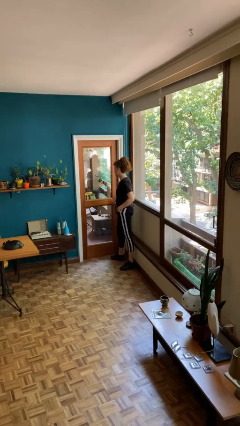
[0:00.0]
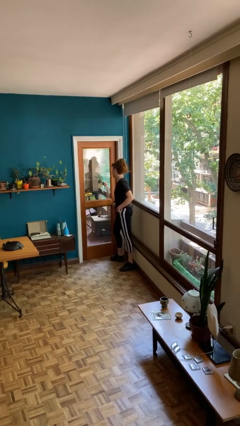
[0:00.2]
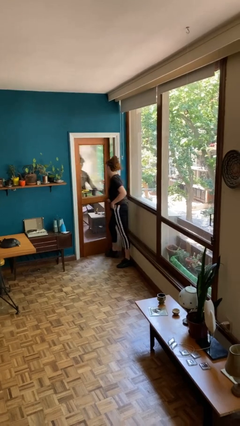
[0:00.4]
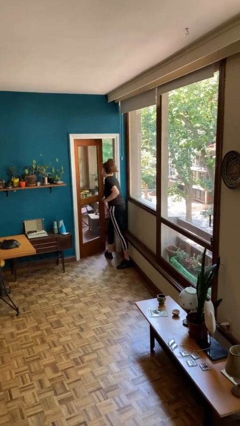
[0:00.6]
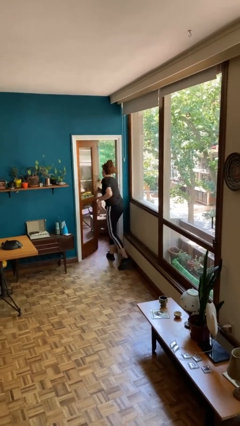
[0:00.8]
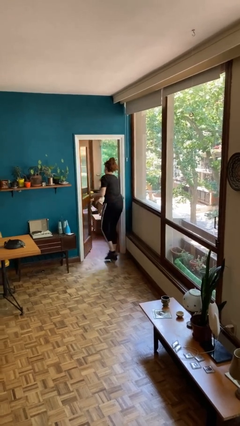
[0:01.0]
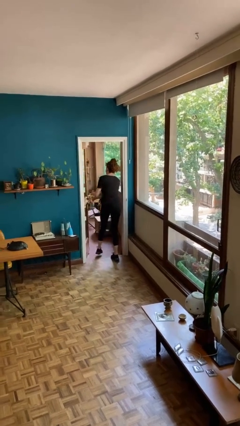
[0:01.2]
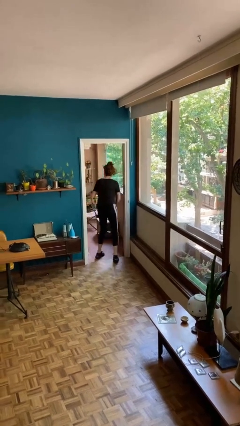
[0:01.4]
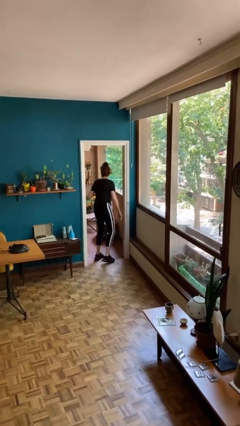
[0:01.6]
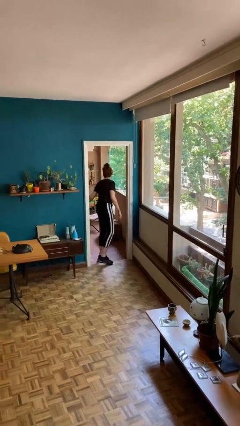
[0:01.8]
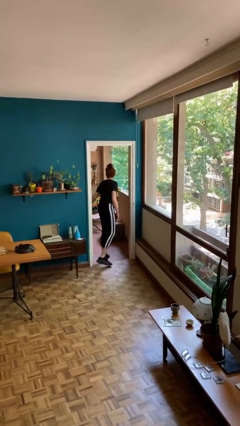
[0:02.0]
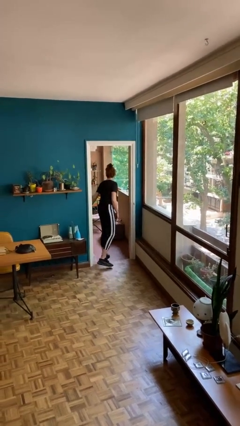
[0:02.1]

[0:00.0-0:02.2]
person opens facility door

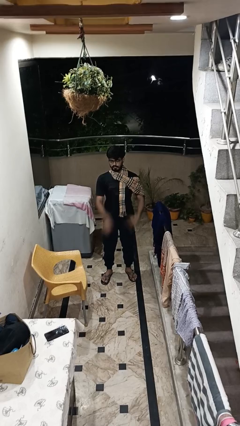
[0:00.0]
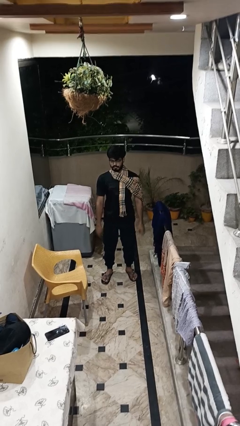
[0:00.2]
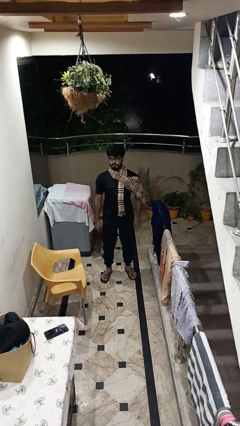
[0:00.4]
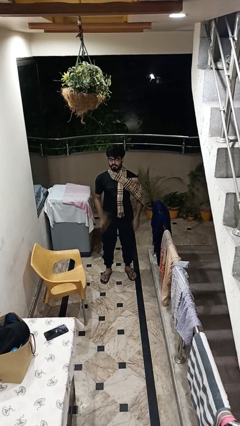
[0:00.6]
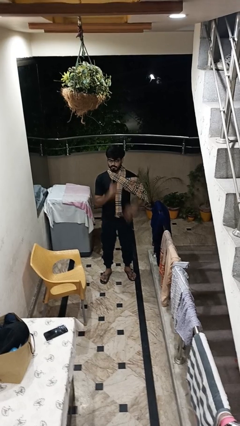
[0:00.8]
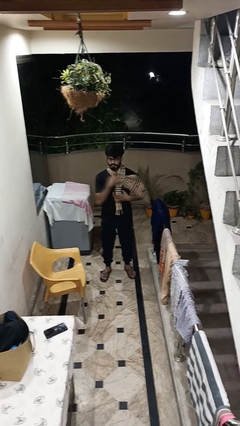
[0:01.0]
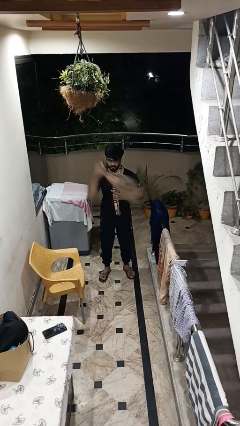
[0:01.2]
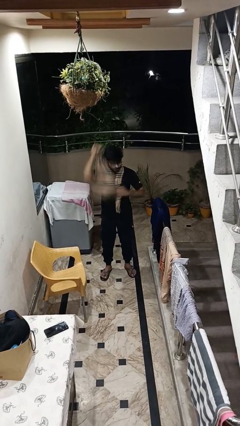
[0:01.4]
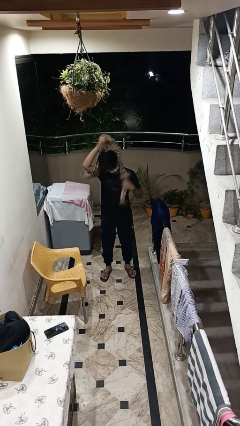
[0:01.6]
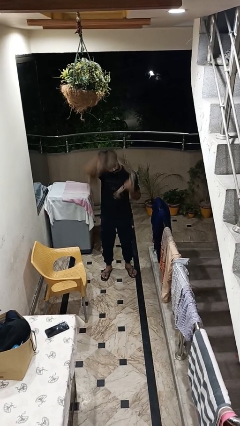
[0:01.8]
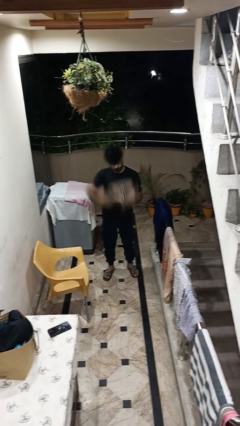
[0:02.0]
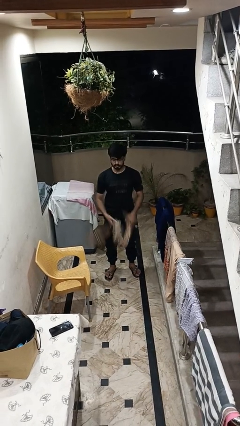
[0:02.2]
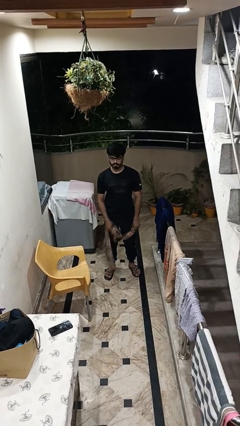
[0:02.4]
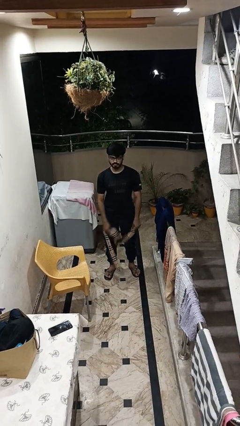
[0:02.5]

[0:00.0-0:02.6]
person takes off scarf

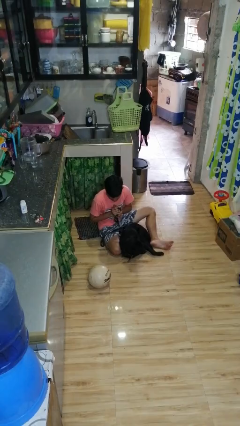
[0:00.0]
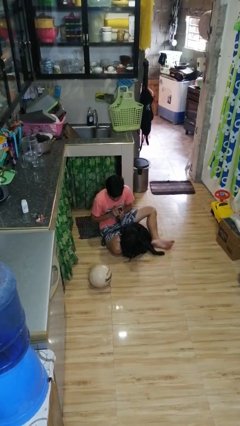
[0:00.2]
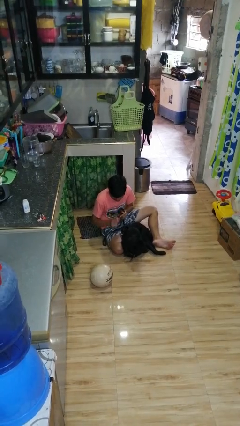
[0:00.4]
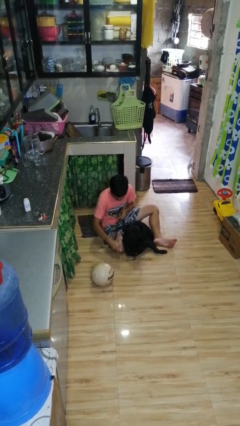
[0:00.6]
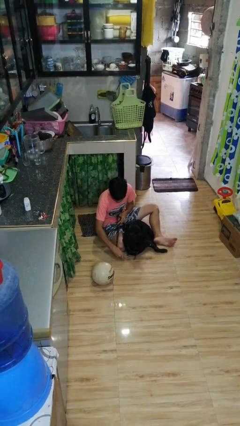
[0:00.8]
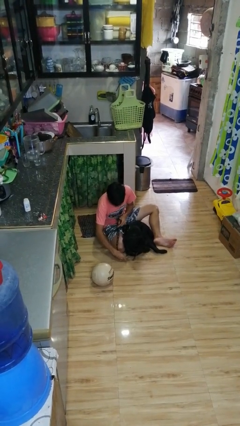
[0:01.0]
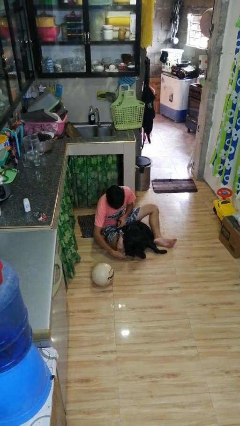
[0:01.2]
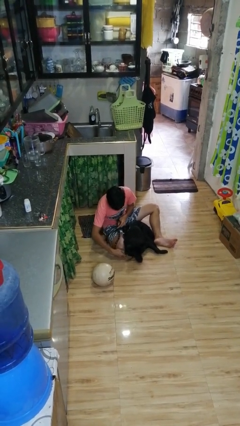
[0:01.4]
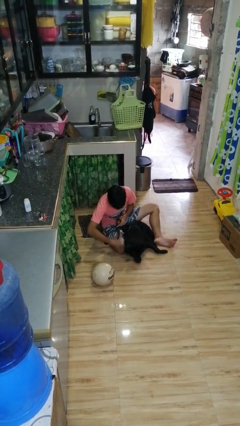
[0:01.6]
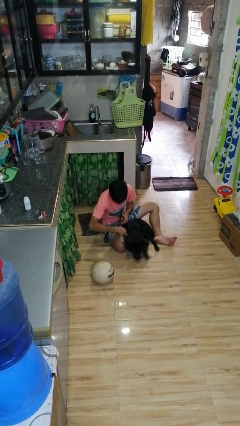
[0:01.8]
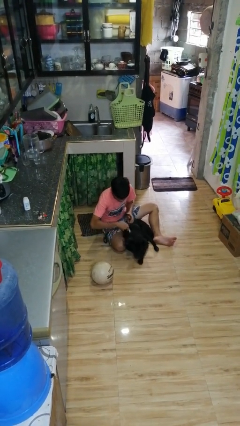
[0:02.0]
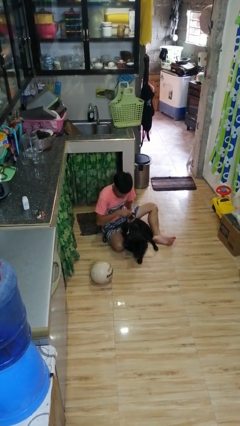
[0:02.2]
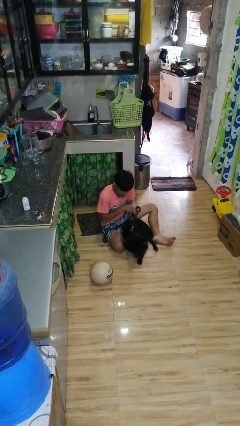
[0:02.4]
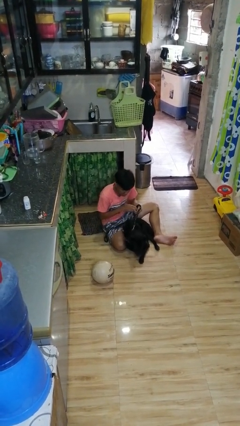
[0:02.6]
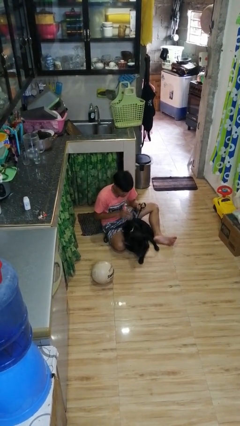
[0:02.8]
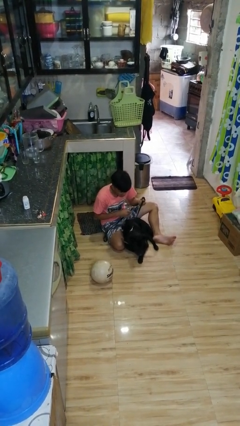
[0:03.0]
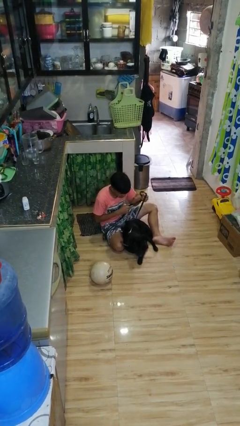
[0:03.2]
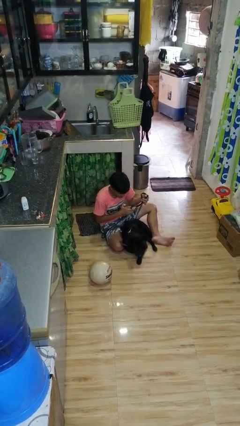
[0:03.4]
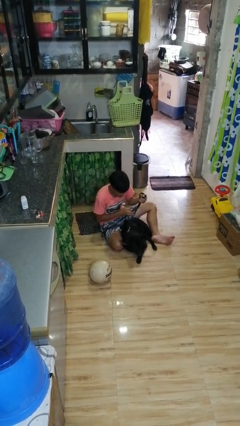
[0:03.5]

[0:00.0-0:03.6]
person attaches leash to dog

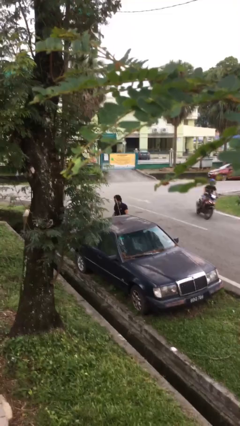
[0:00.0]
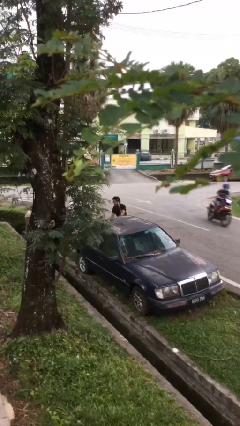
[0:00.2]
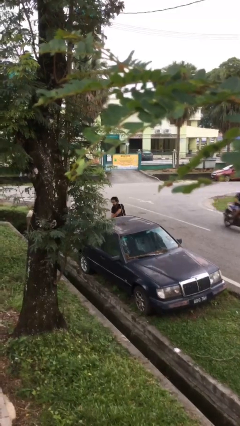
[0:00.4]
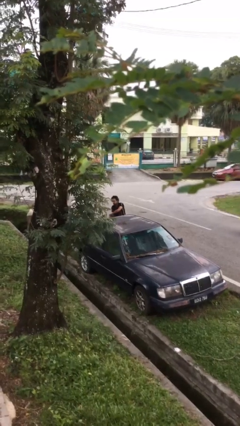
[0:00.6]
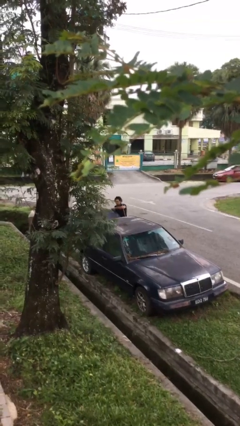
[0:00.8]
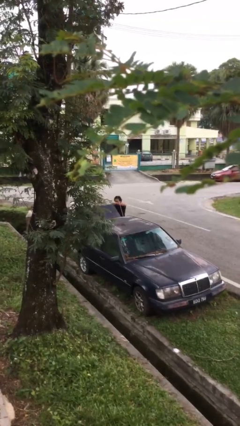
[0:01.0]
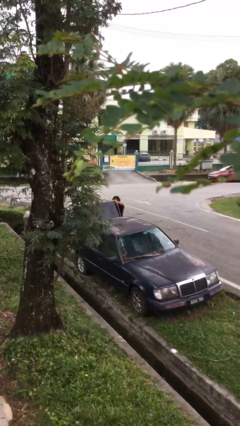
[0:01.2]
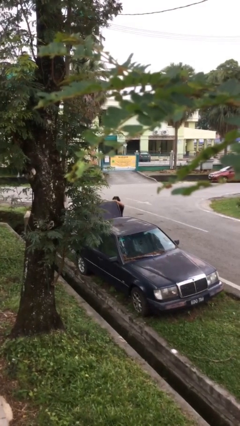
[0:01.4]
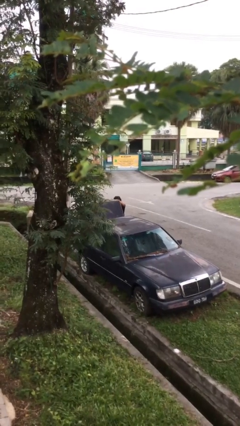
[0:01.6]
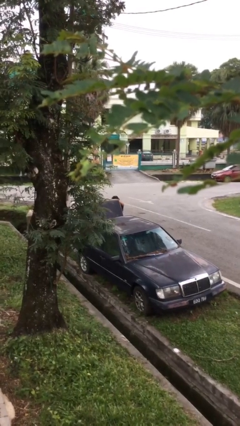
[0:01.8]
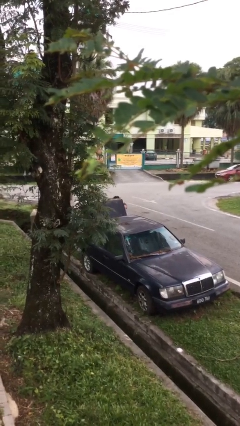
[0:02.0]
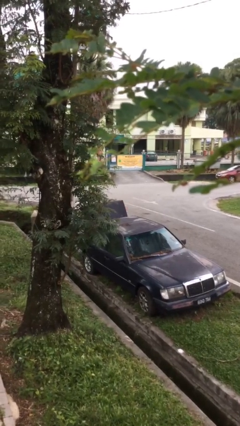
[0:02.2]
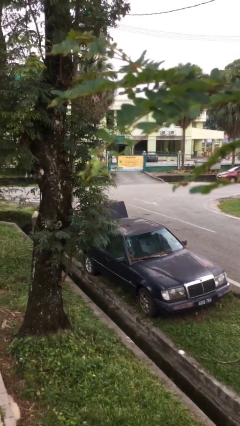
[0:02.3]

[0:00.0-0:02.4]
person opens car trunk

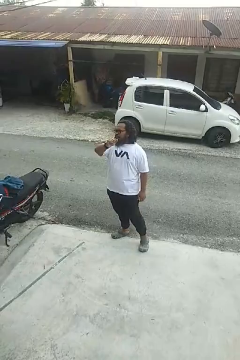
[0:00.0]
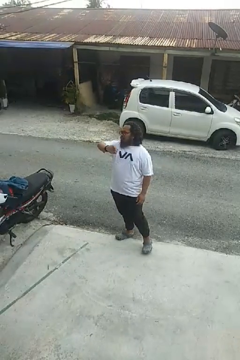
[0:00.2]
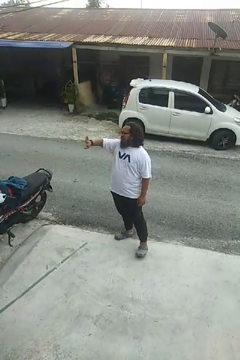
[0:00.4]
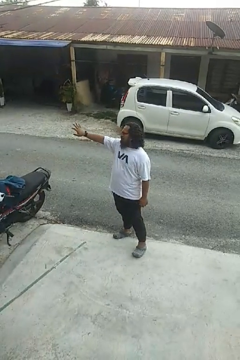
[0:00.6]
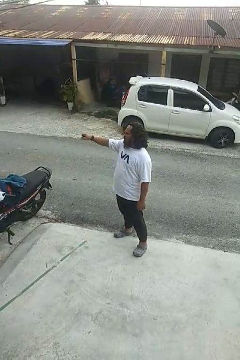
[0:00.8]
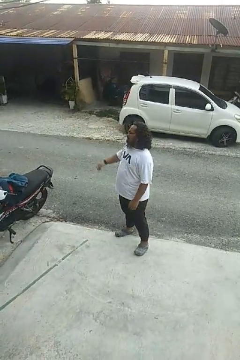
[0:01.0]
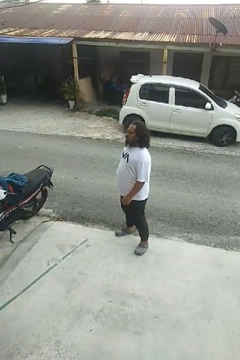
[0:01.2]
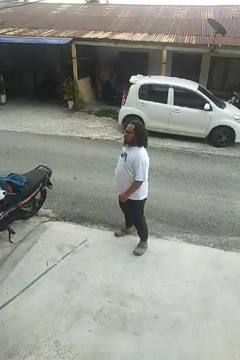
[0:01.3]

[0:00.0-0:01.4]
person gestures swipe right

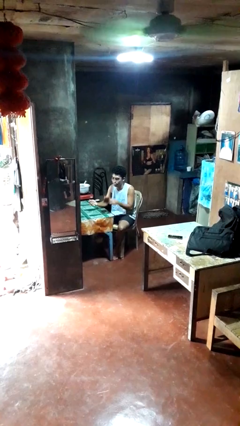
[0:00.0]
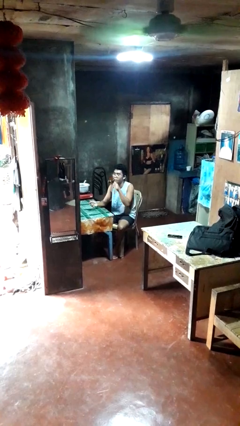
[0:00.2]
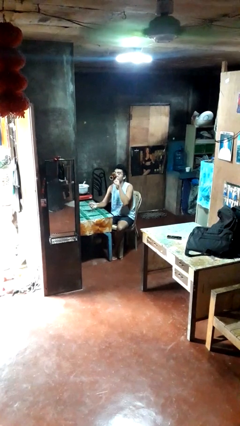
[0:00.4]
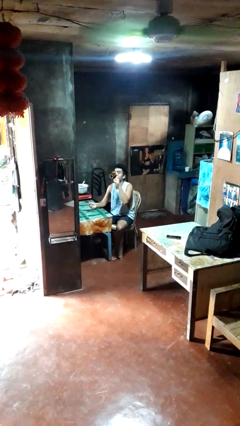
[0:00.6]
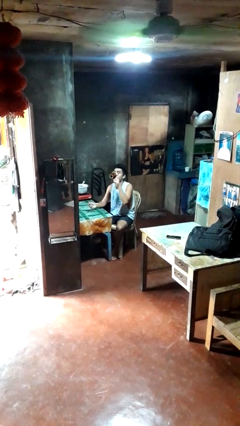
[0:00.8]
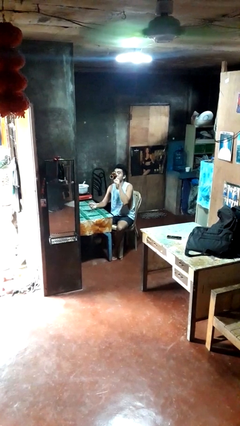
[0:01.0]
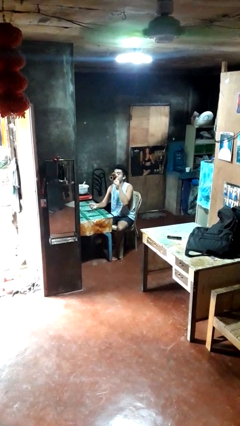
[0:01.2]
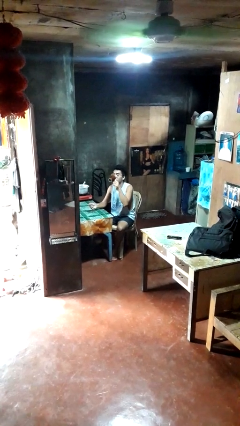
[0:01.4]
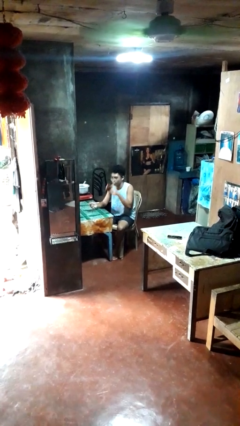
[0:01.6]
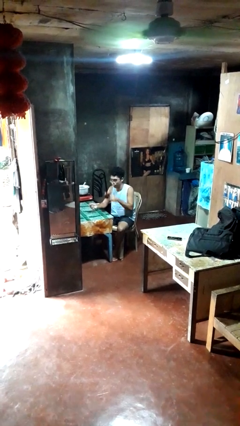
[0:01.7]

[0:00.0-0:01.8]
person drinks from mug

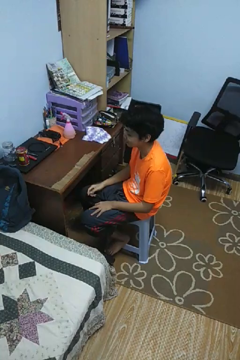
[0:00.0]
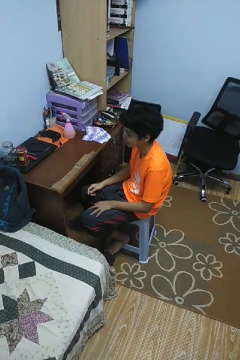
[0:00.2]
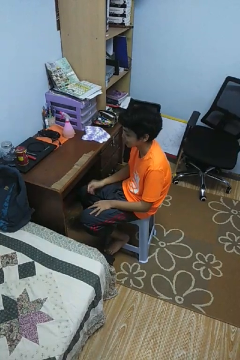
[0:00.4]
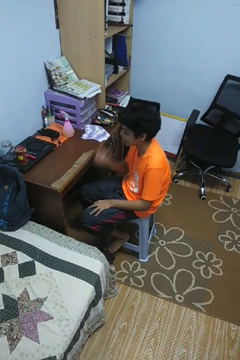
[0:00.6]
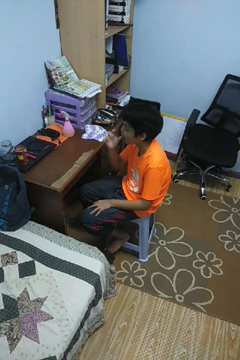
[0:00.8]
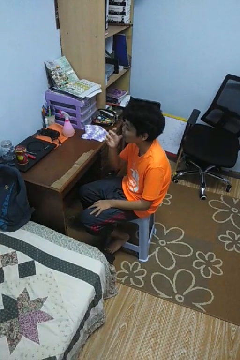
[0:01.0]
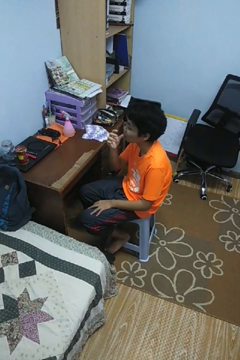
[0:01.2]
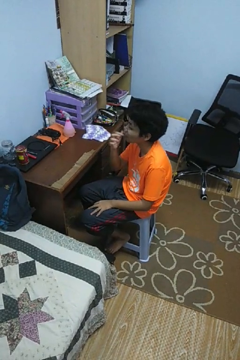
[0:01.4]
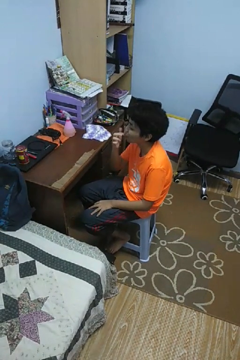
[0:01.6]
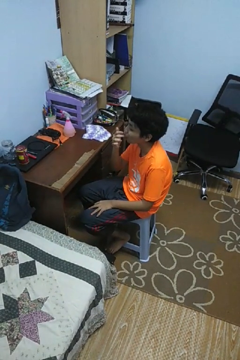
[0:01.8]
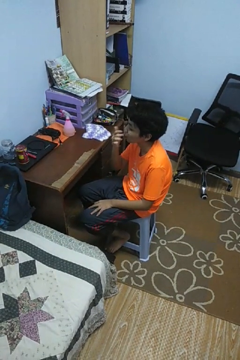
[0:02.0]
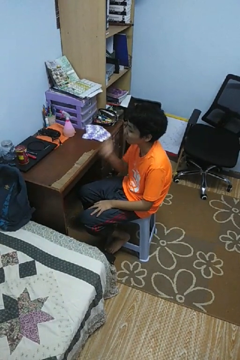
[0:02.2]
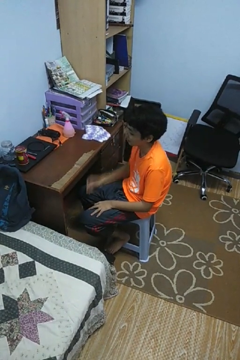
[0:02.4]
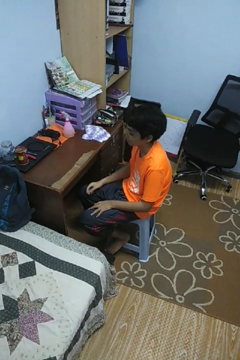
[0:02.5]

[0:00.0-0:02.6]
person licks fingers

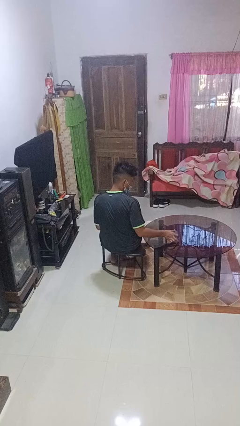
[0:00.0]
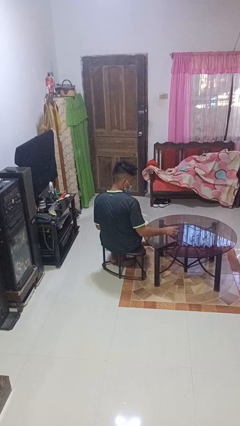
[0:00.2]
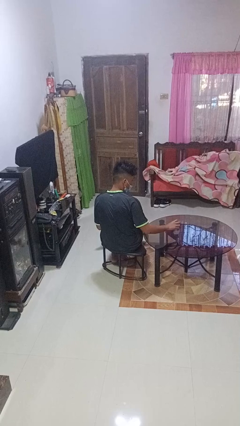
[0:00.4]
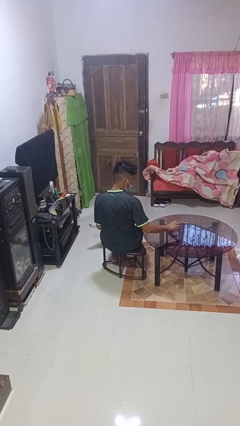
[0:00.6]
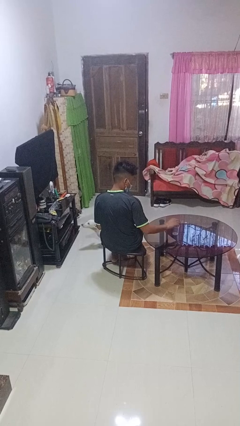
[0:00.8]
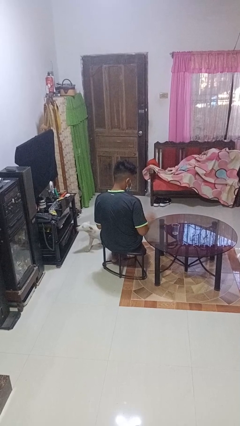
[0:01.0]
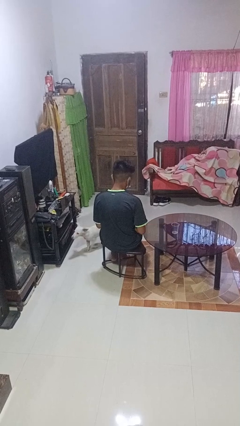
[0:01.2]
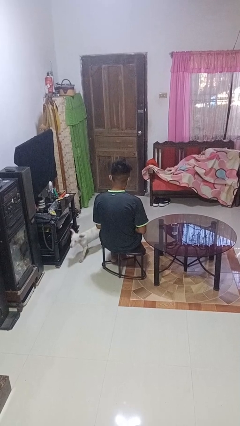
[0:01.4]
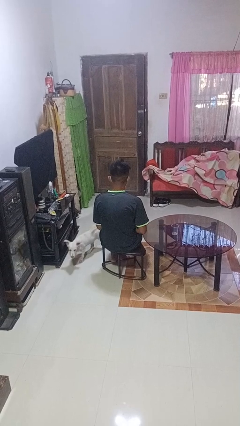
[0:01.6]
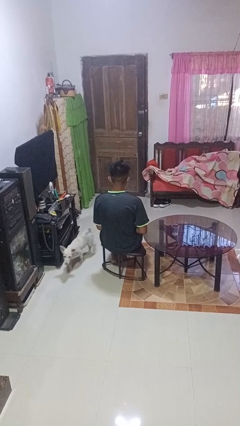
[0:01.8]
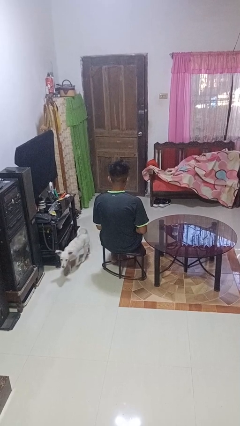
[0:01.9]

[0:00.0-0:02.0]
person sets upright glass
